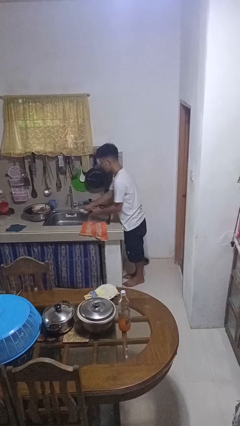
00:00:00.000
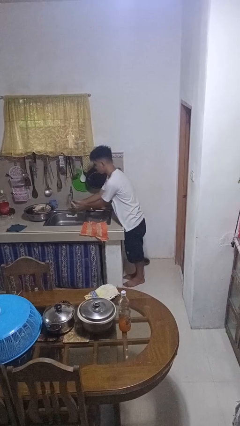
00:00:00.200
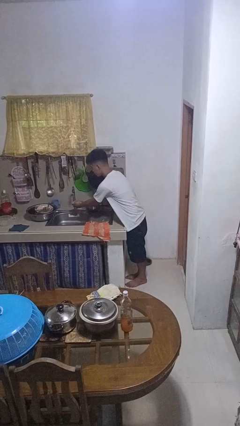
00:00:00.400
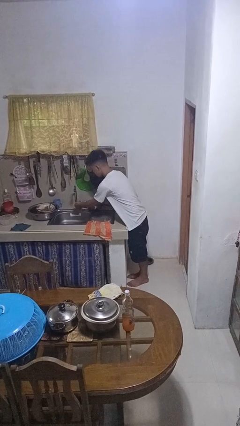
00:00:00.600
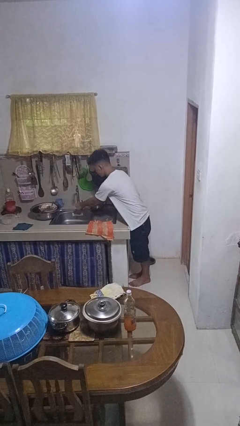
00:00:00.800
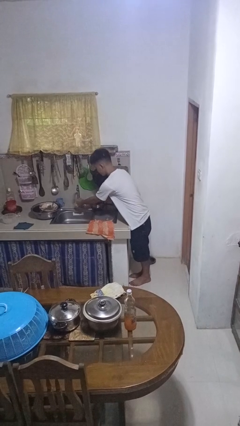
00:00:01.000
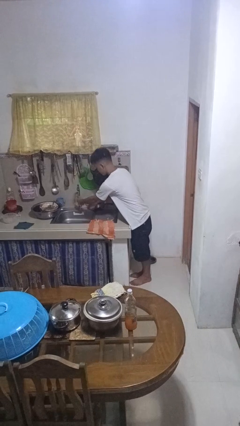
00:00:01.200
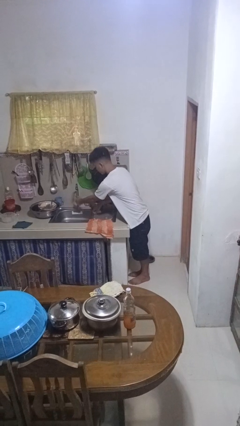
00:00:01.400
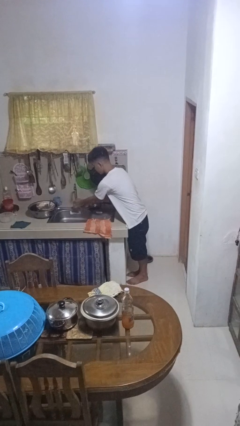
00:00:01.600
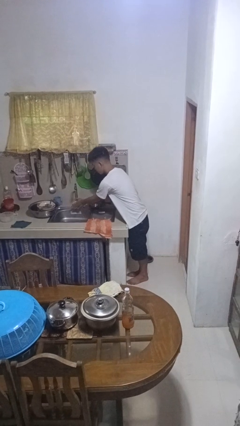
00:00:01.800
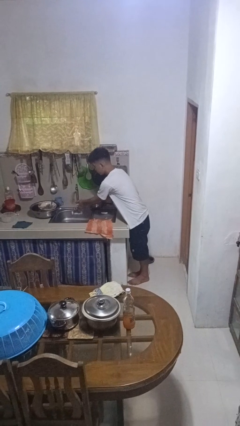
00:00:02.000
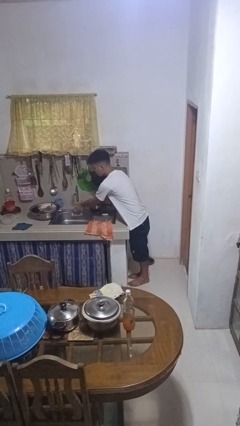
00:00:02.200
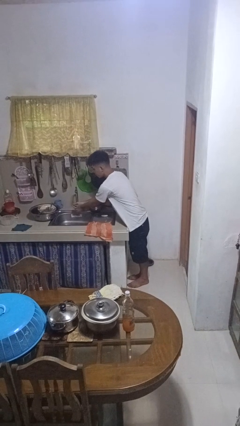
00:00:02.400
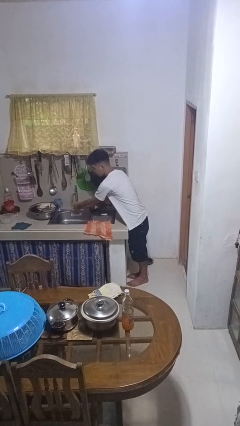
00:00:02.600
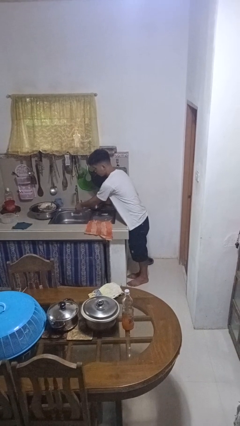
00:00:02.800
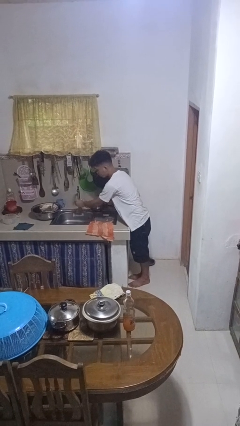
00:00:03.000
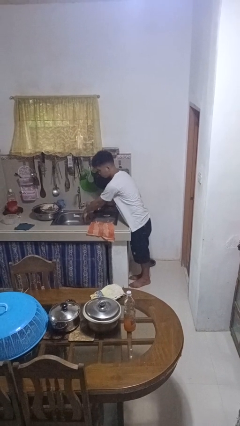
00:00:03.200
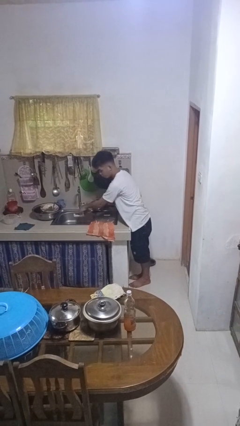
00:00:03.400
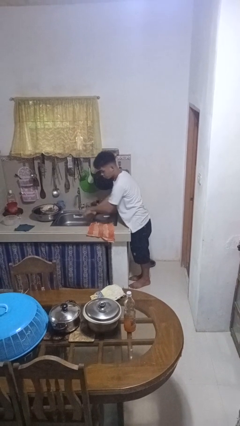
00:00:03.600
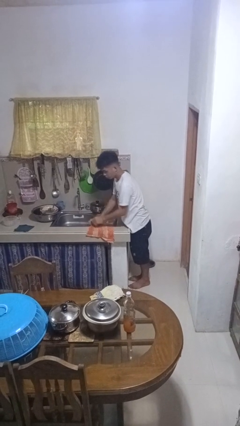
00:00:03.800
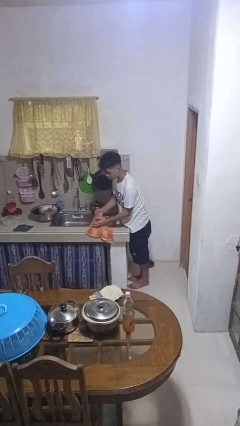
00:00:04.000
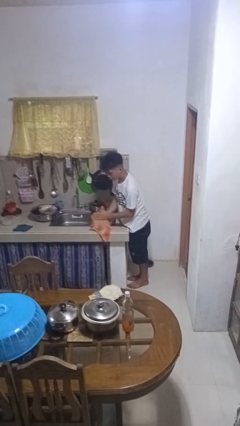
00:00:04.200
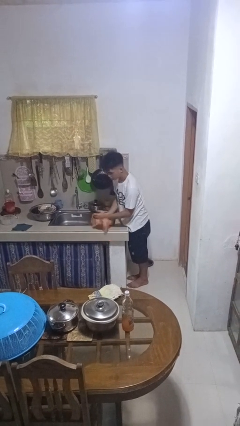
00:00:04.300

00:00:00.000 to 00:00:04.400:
person washes hands

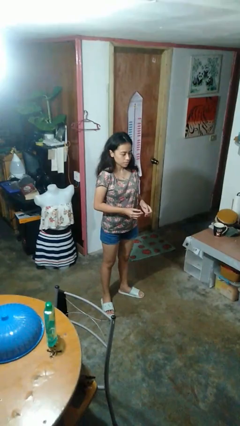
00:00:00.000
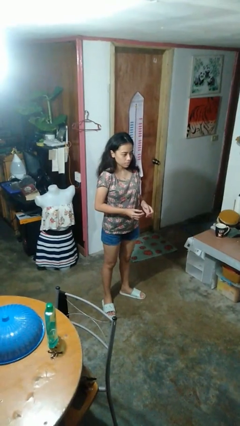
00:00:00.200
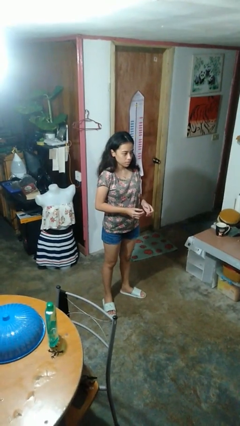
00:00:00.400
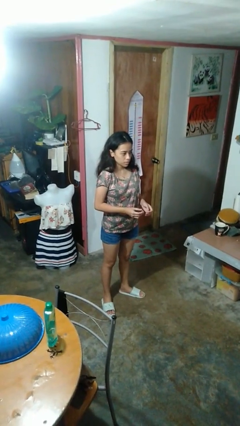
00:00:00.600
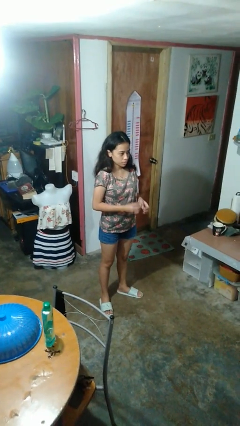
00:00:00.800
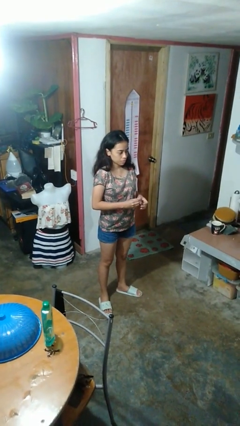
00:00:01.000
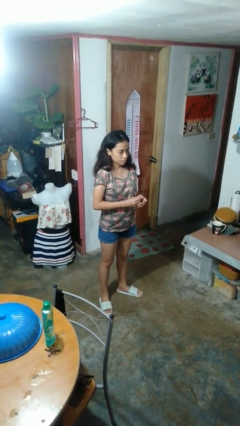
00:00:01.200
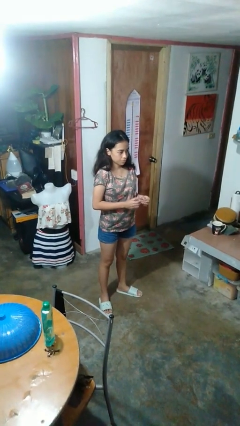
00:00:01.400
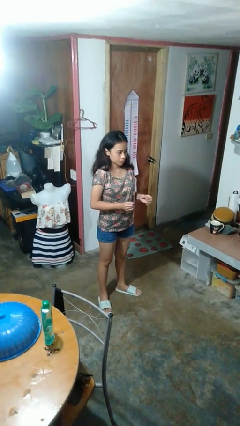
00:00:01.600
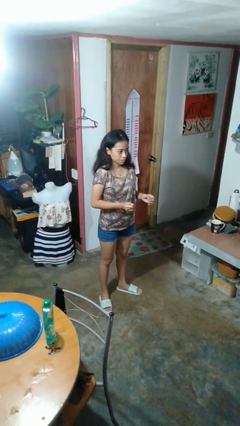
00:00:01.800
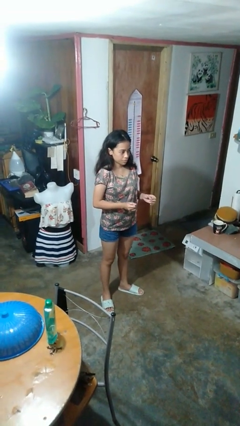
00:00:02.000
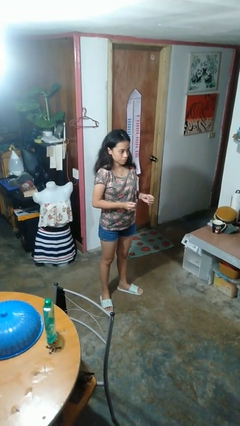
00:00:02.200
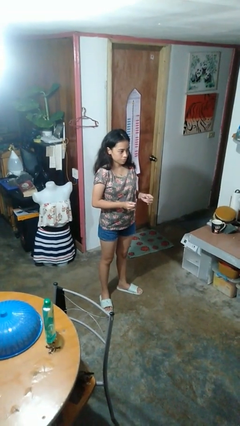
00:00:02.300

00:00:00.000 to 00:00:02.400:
person puts on ring

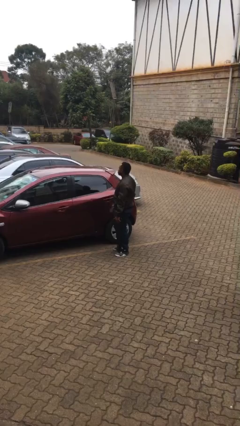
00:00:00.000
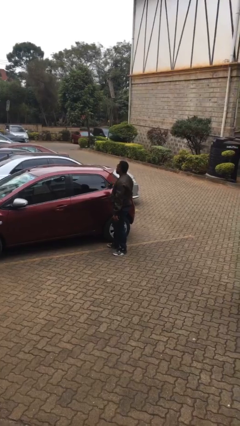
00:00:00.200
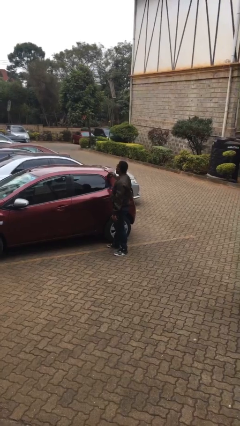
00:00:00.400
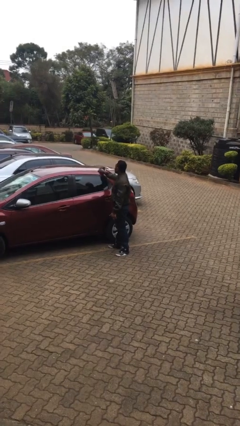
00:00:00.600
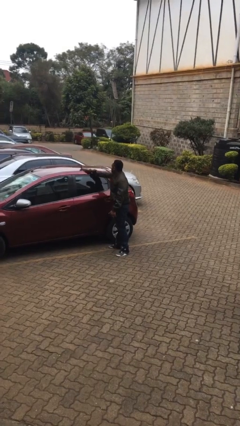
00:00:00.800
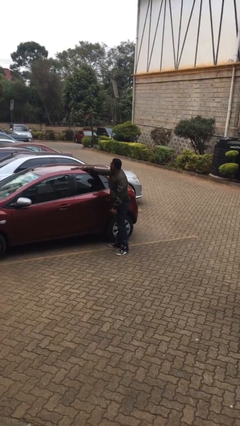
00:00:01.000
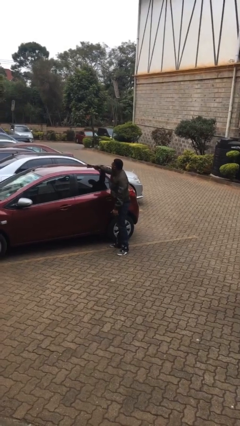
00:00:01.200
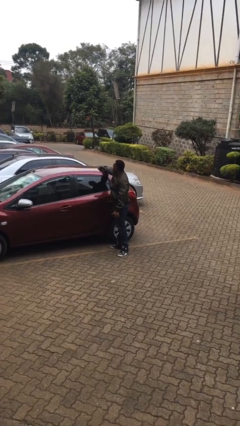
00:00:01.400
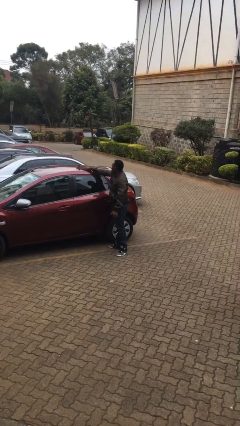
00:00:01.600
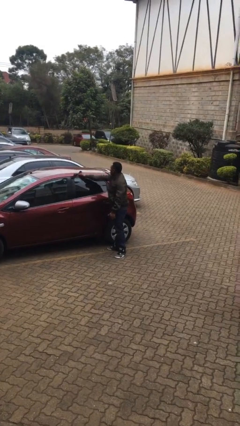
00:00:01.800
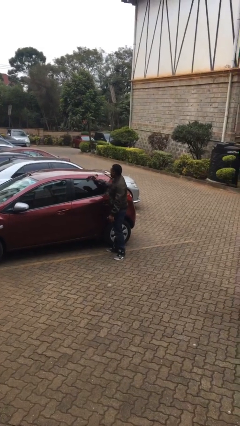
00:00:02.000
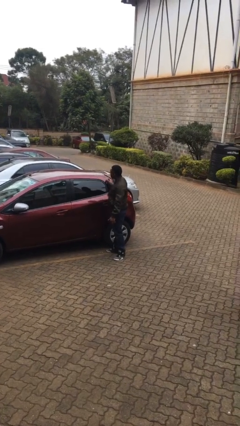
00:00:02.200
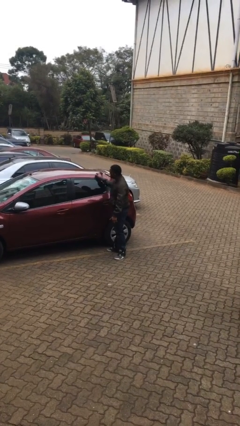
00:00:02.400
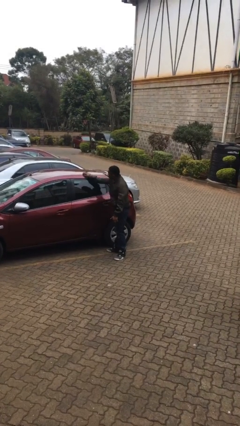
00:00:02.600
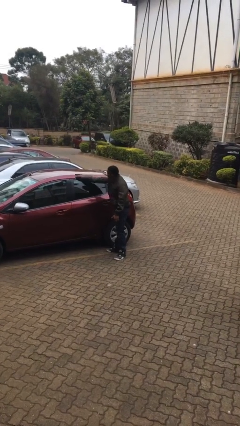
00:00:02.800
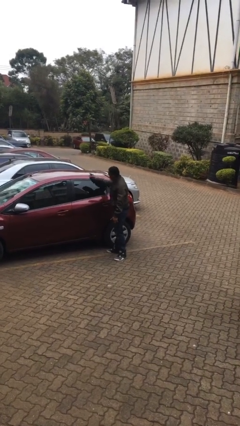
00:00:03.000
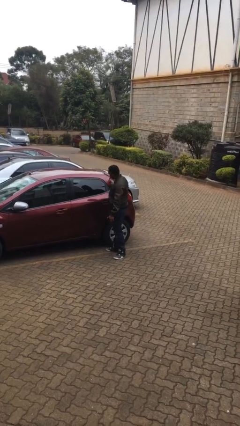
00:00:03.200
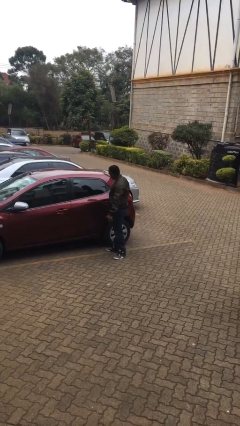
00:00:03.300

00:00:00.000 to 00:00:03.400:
person polishes car with rag

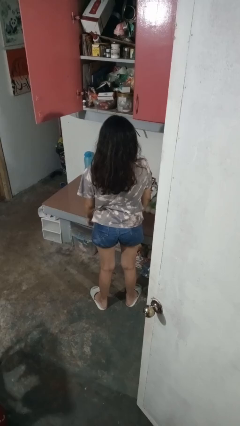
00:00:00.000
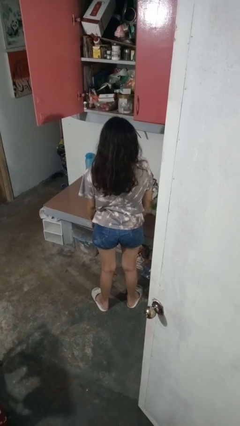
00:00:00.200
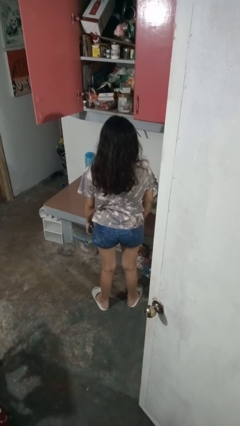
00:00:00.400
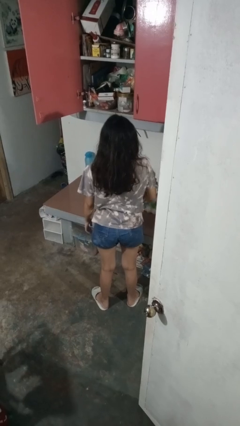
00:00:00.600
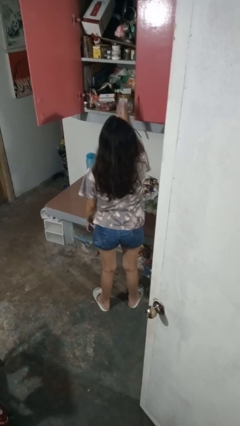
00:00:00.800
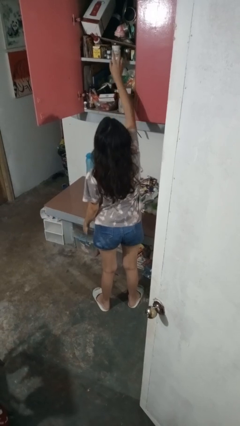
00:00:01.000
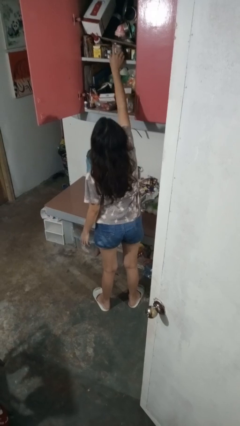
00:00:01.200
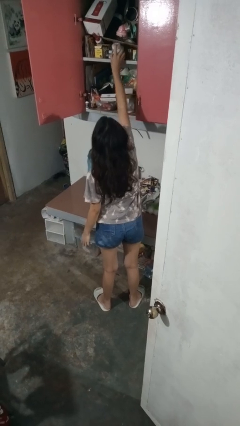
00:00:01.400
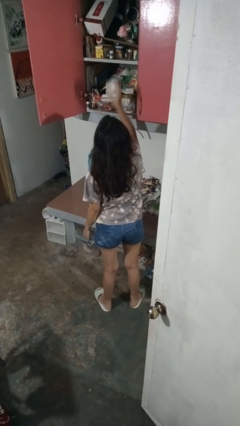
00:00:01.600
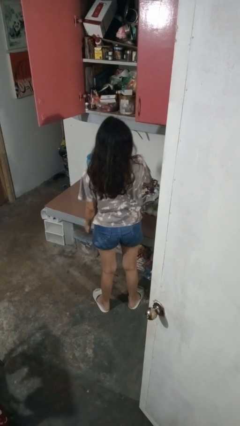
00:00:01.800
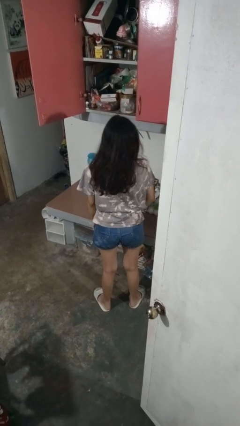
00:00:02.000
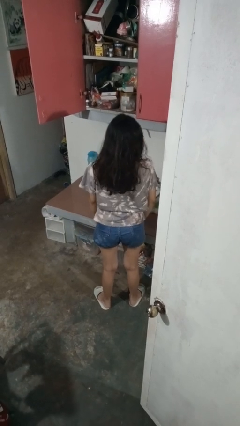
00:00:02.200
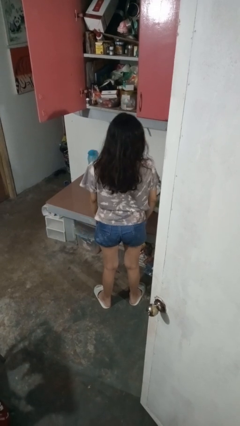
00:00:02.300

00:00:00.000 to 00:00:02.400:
person takes object from cabinet

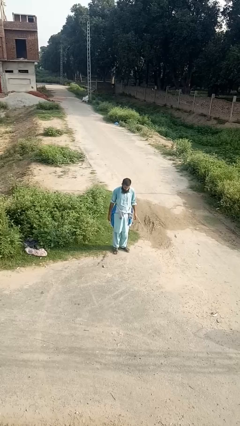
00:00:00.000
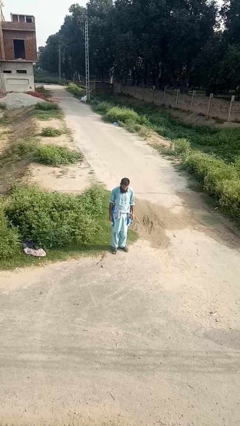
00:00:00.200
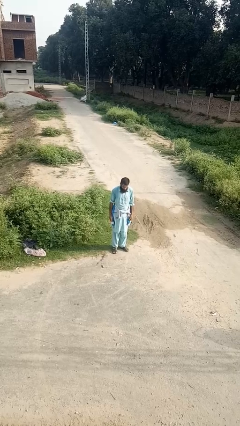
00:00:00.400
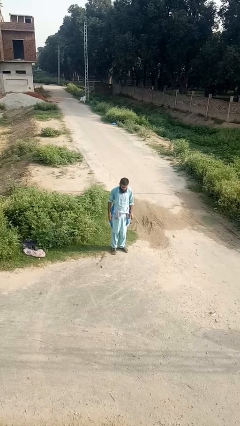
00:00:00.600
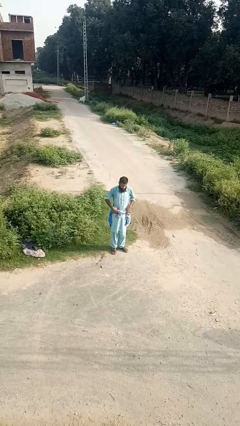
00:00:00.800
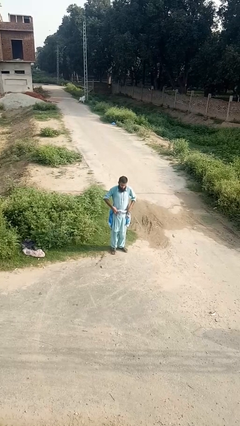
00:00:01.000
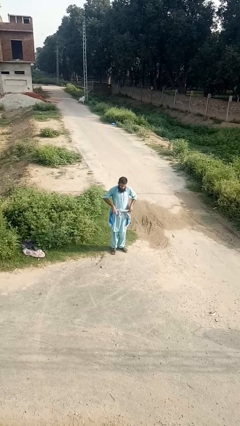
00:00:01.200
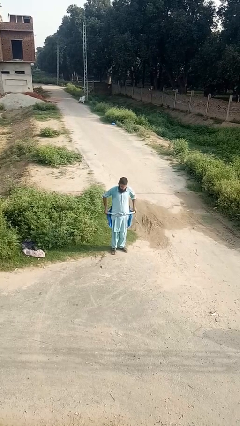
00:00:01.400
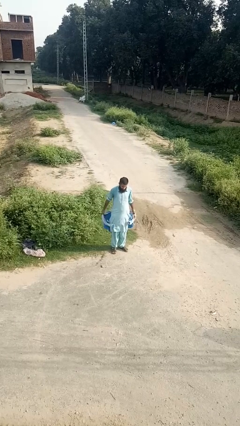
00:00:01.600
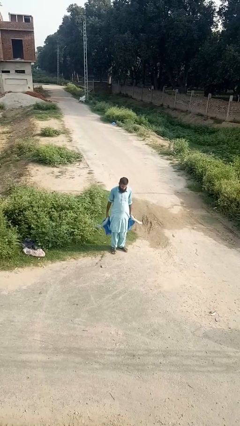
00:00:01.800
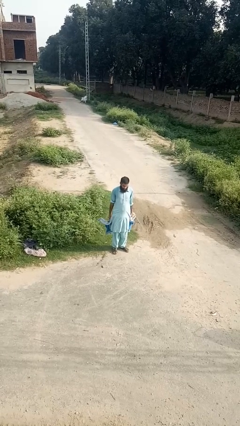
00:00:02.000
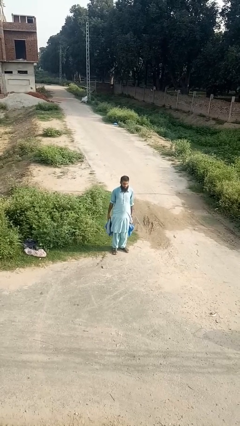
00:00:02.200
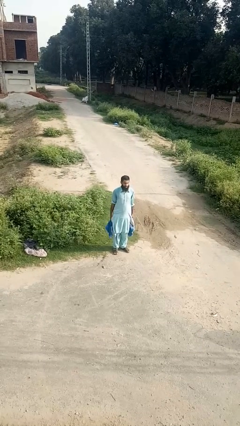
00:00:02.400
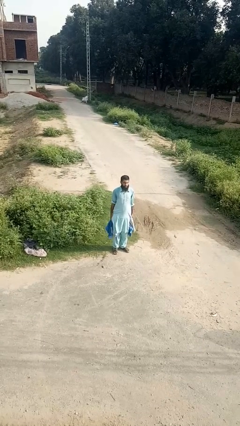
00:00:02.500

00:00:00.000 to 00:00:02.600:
person unties jacket around waist

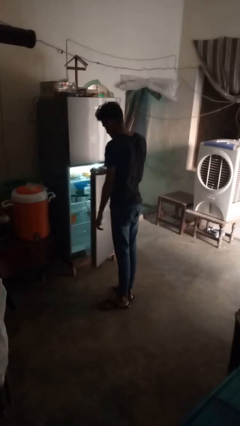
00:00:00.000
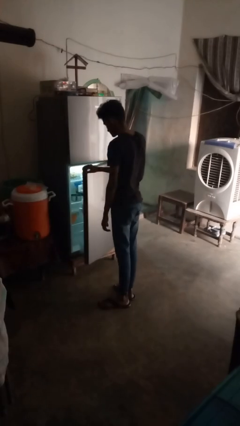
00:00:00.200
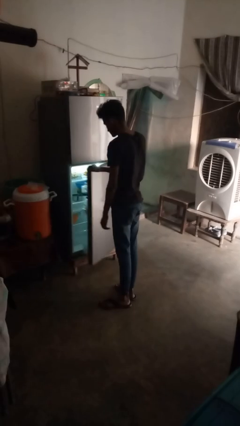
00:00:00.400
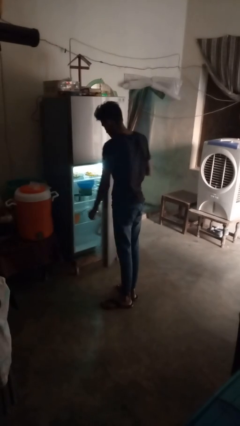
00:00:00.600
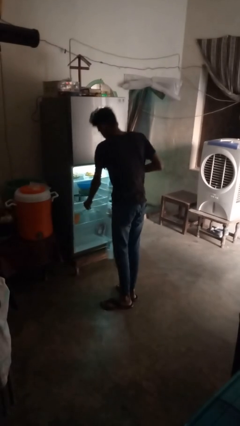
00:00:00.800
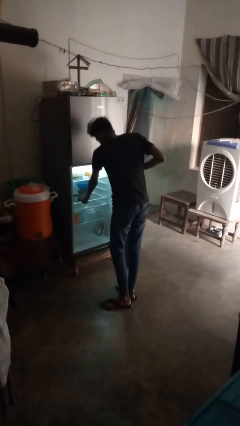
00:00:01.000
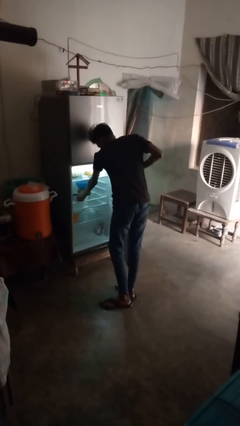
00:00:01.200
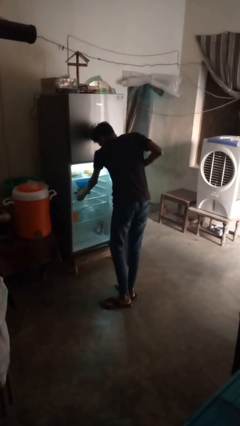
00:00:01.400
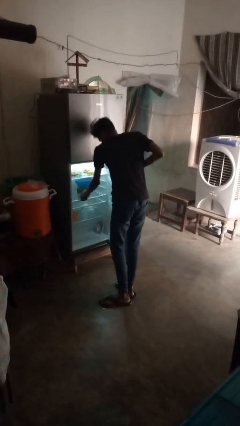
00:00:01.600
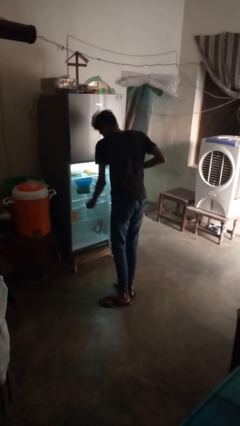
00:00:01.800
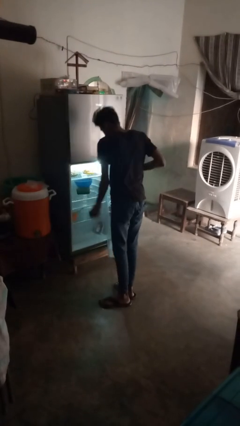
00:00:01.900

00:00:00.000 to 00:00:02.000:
person takes object from refrigerator
